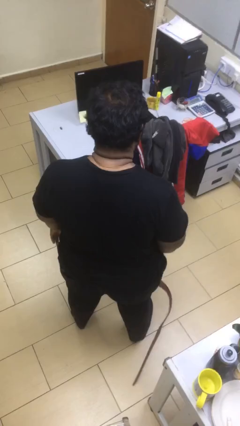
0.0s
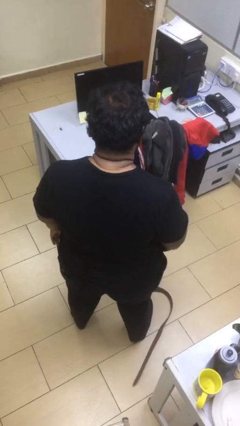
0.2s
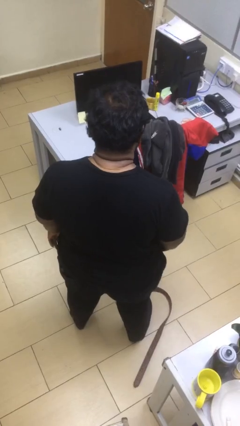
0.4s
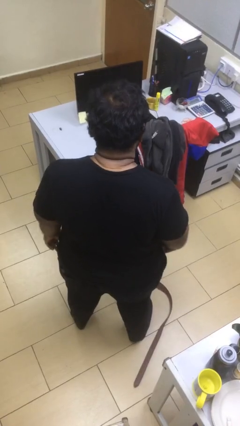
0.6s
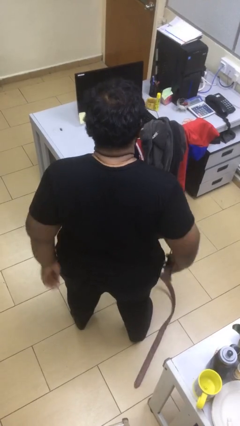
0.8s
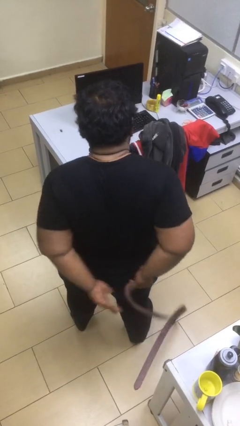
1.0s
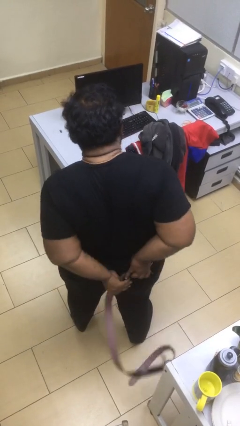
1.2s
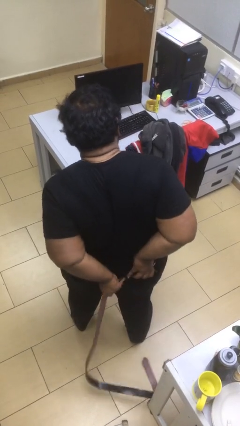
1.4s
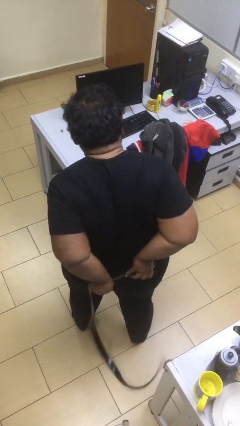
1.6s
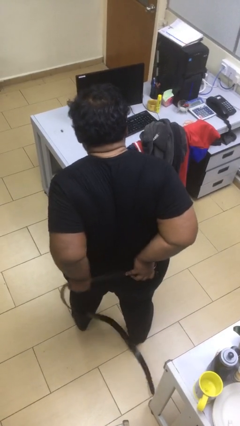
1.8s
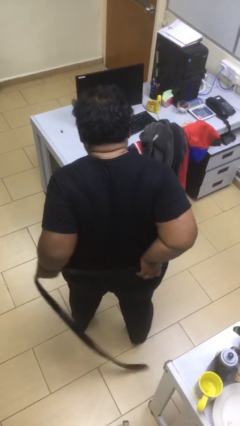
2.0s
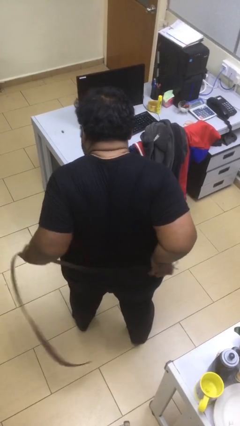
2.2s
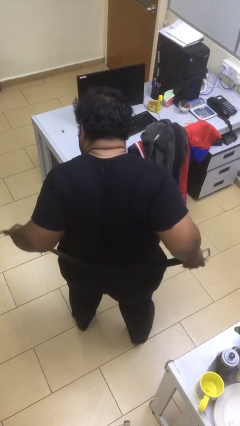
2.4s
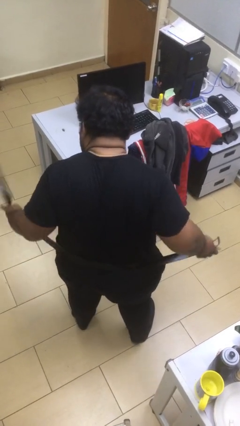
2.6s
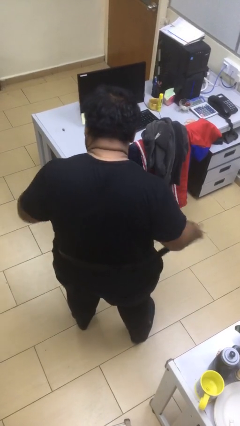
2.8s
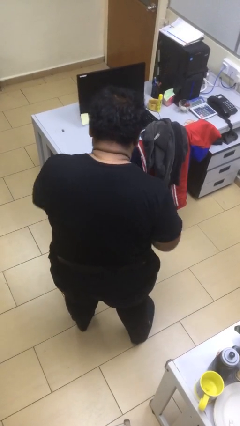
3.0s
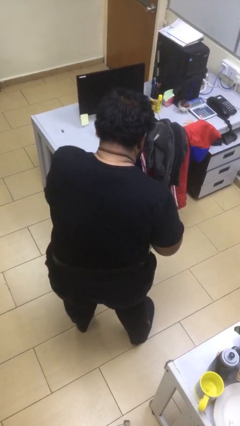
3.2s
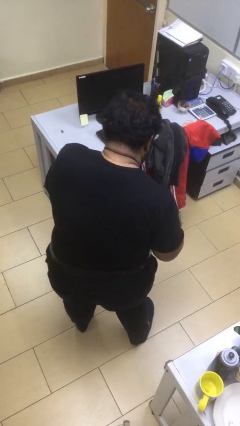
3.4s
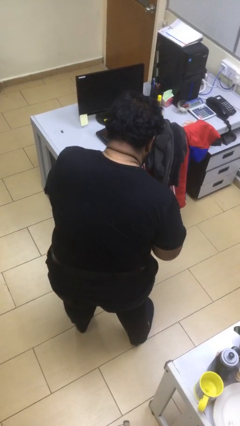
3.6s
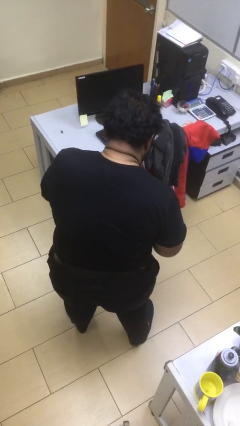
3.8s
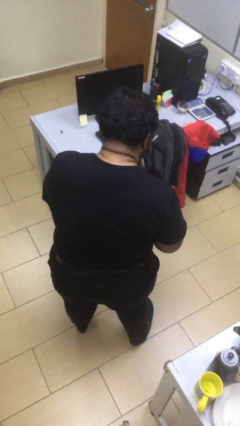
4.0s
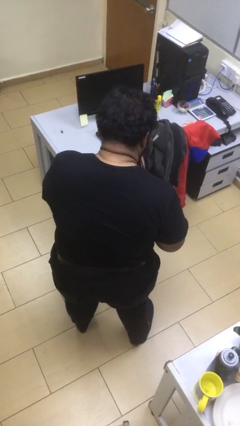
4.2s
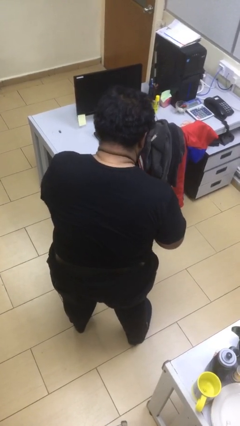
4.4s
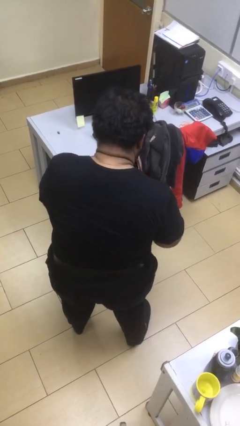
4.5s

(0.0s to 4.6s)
person puts on belt

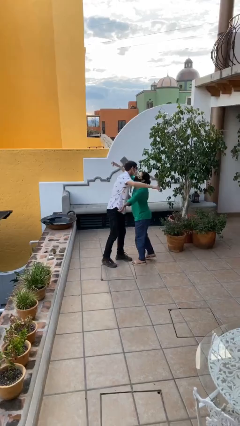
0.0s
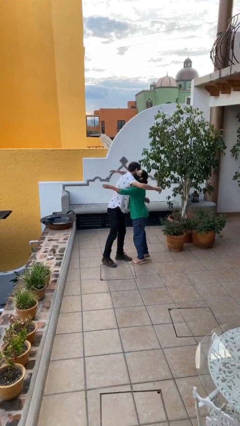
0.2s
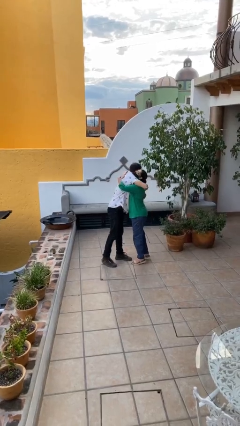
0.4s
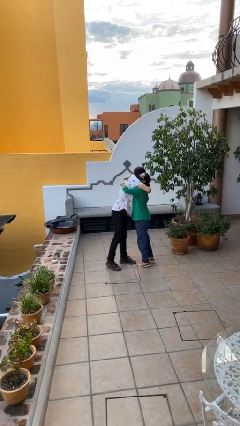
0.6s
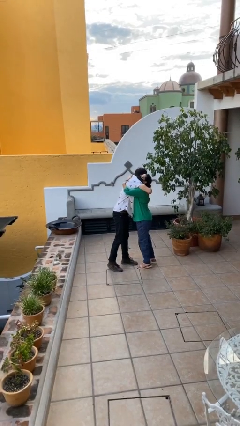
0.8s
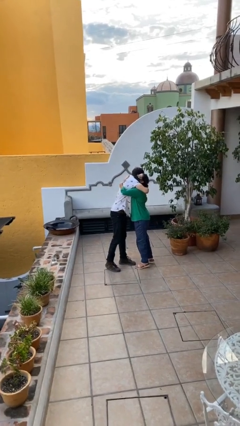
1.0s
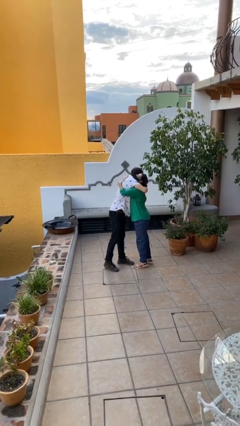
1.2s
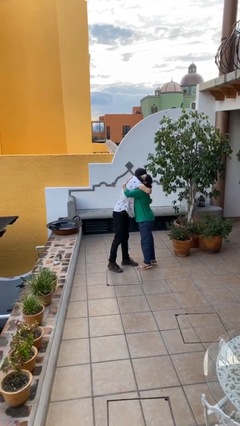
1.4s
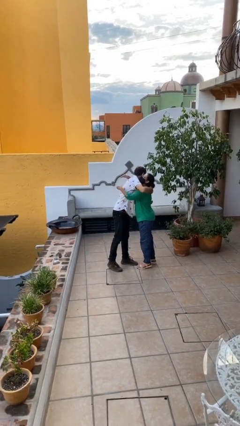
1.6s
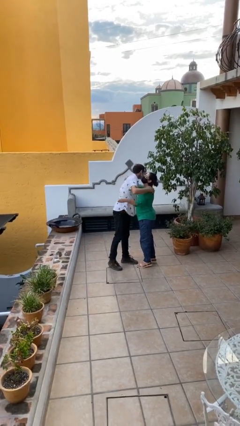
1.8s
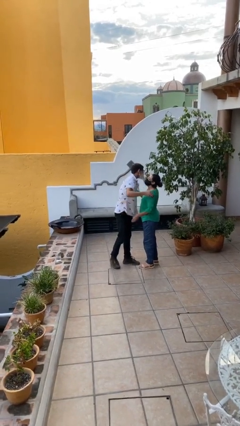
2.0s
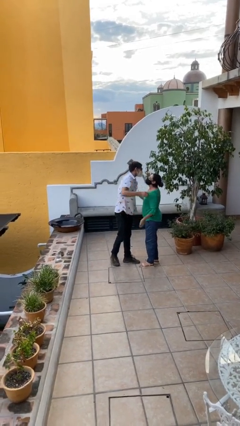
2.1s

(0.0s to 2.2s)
person embraces person

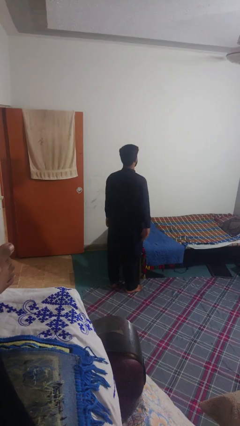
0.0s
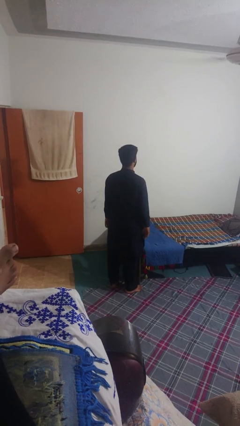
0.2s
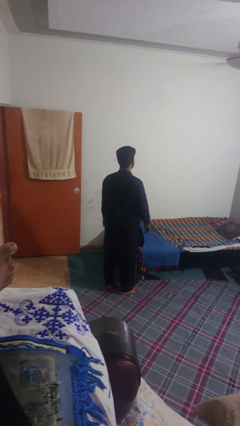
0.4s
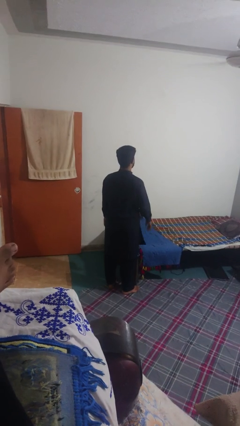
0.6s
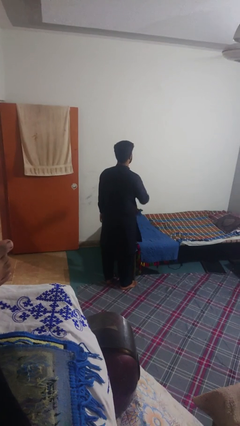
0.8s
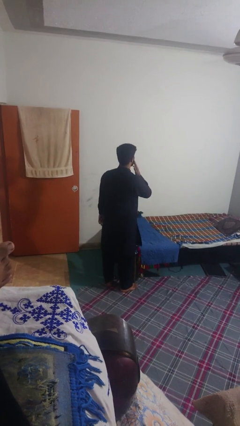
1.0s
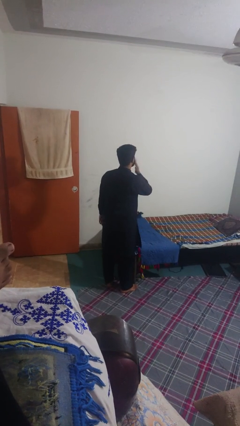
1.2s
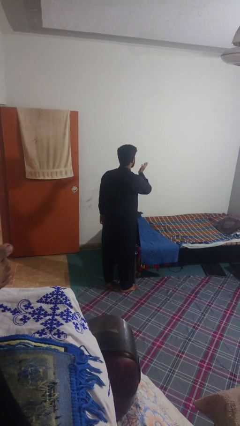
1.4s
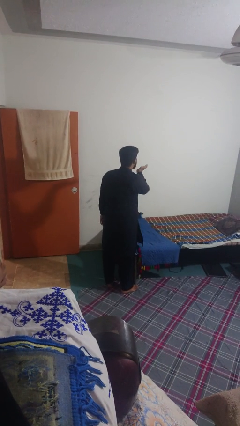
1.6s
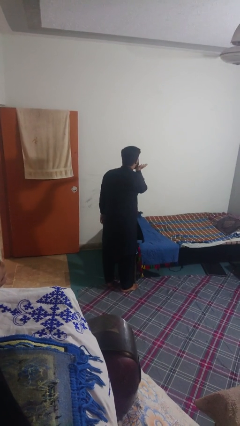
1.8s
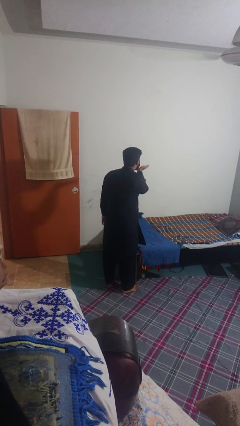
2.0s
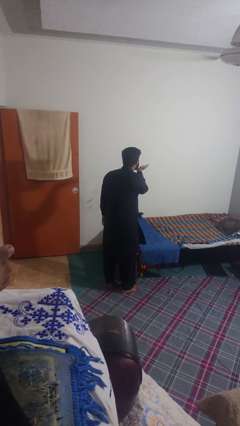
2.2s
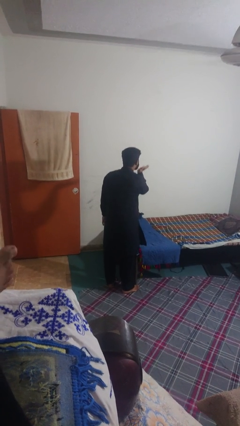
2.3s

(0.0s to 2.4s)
person gestures blow kiss

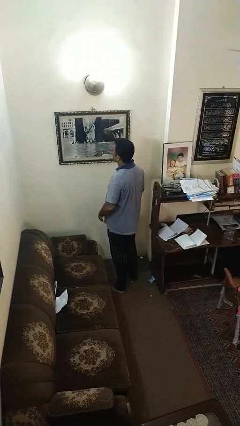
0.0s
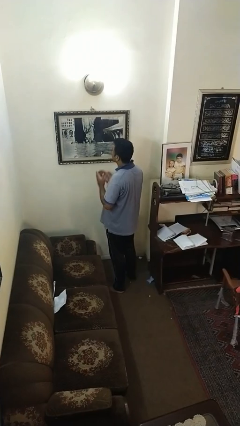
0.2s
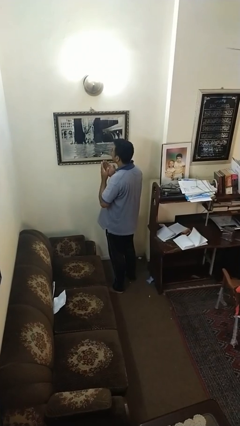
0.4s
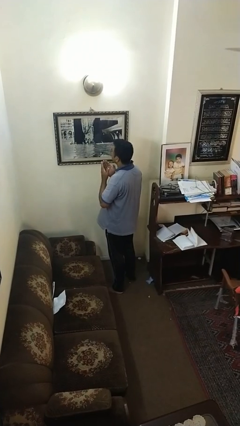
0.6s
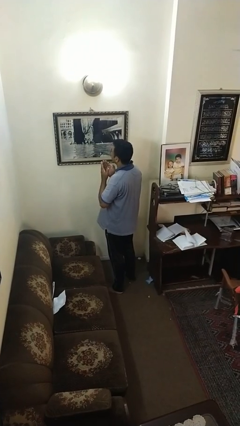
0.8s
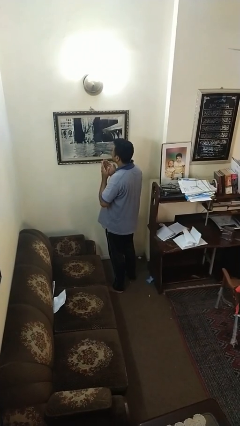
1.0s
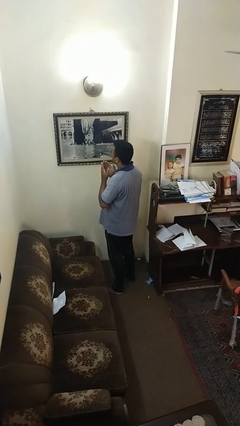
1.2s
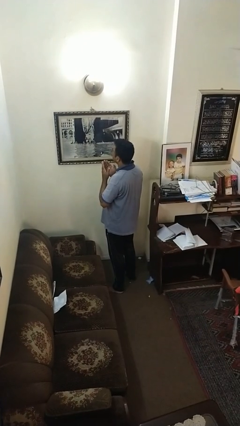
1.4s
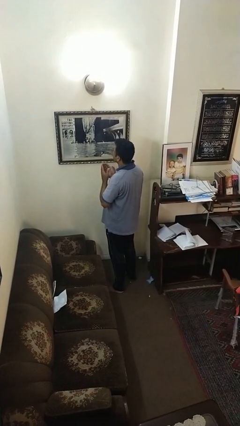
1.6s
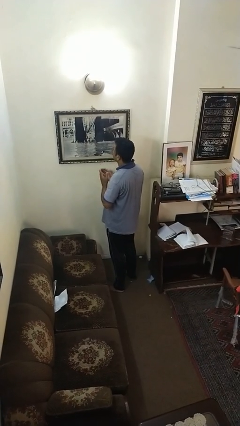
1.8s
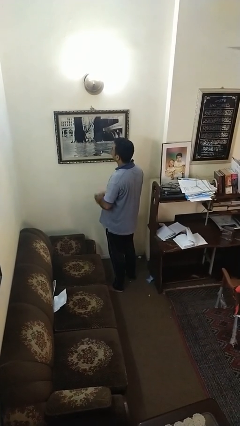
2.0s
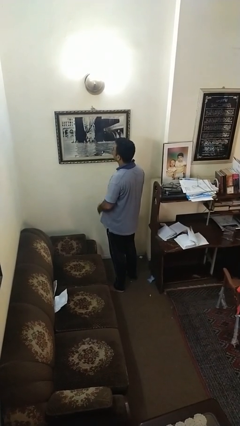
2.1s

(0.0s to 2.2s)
person prays

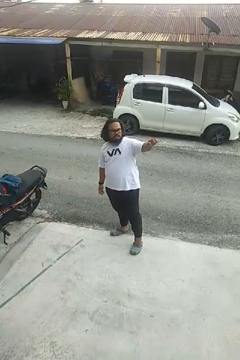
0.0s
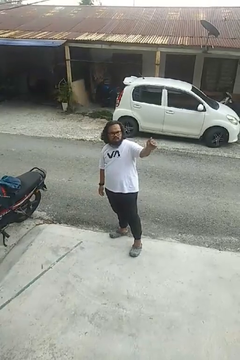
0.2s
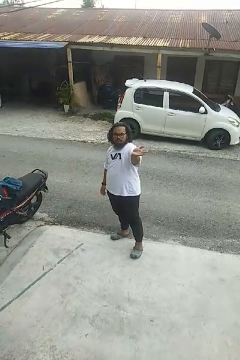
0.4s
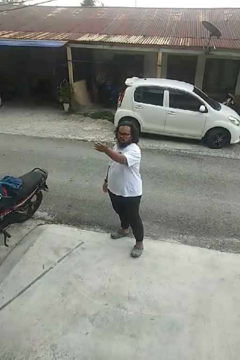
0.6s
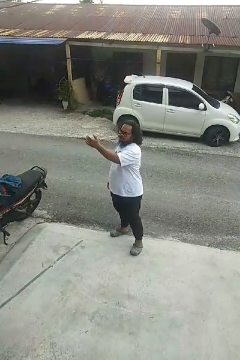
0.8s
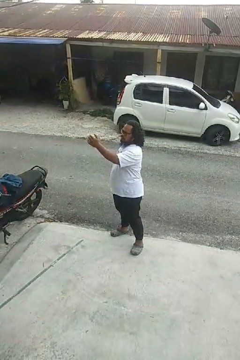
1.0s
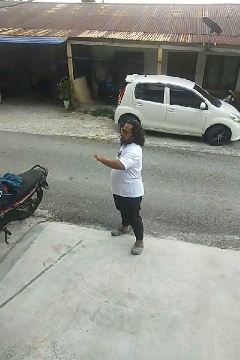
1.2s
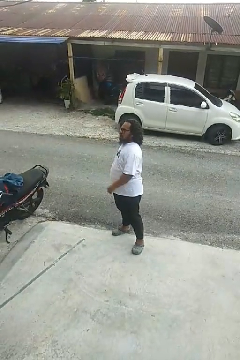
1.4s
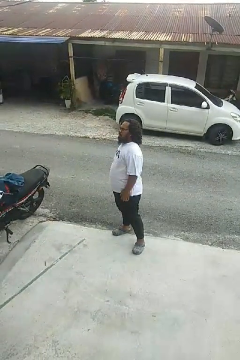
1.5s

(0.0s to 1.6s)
person gestures swipe right

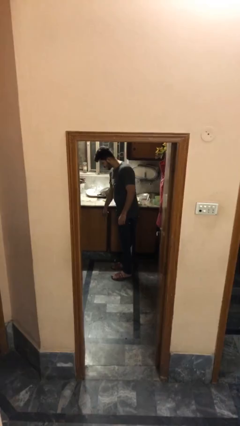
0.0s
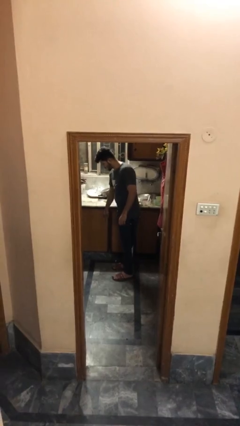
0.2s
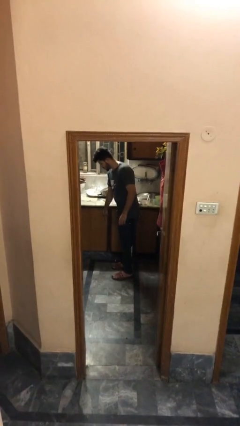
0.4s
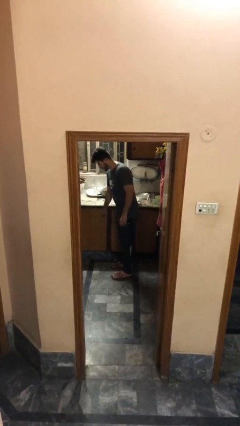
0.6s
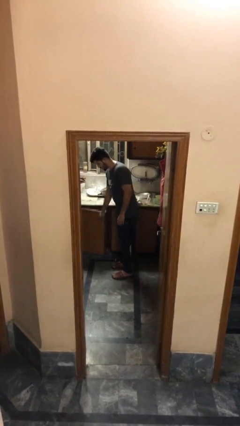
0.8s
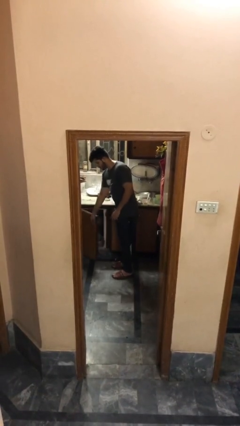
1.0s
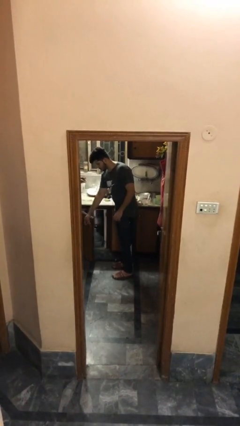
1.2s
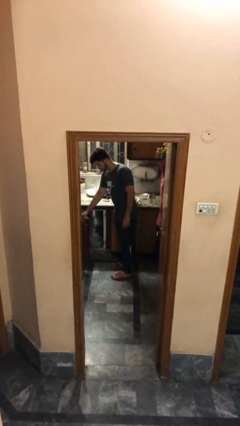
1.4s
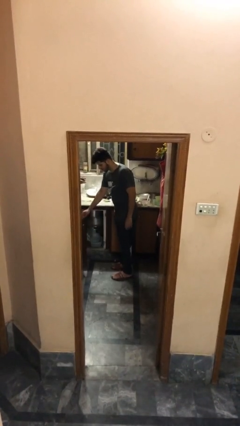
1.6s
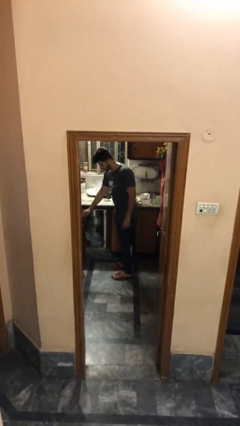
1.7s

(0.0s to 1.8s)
person opens cabinet

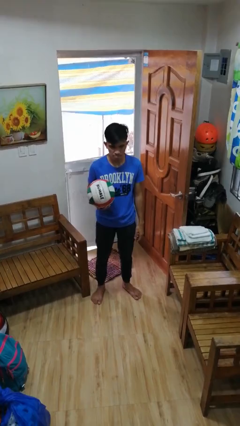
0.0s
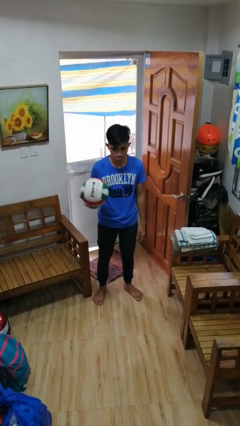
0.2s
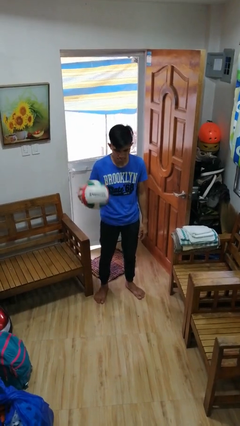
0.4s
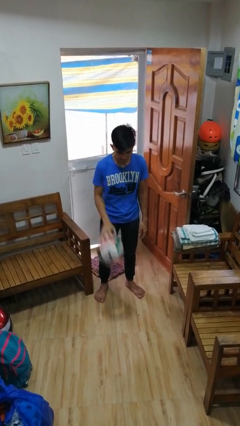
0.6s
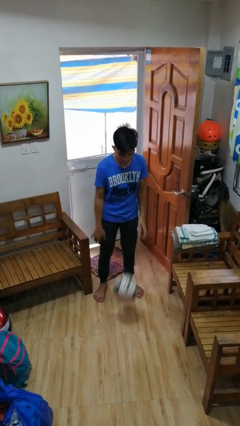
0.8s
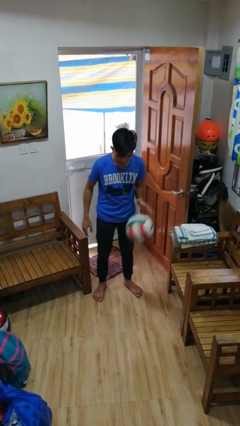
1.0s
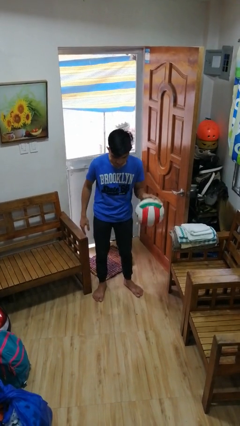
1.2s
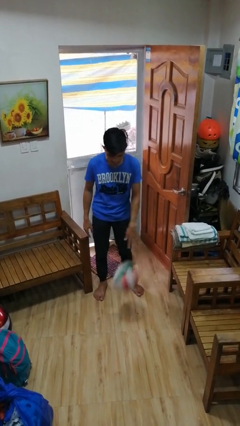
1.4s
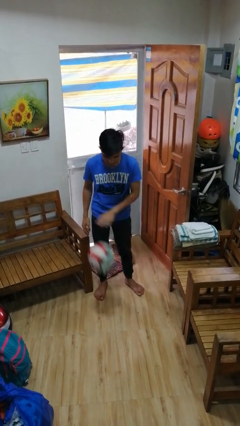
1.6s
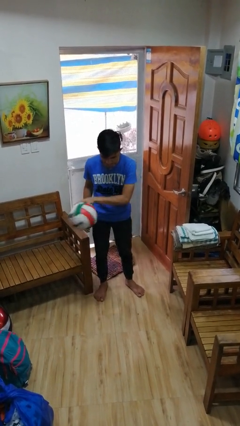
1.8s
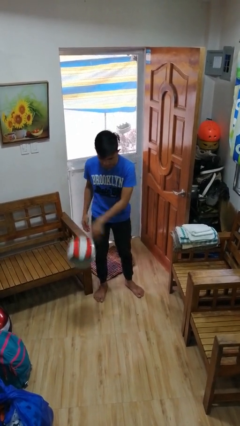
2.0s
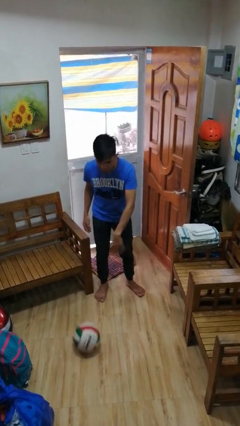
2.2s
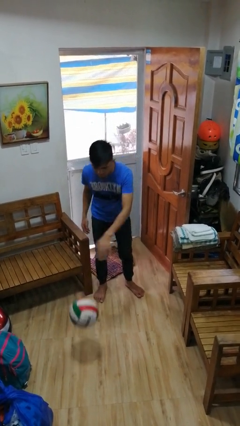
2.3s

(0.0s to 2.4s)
person bounces ball on floor
